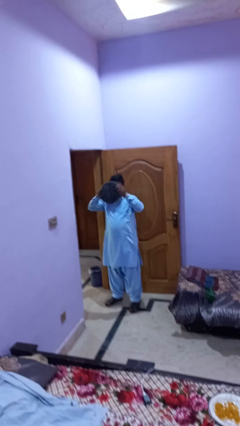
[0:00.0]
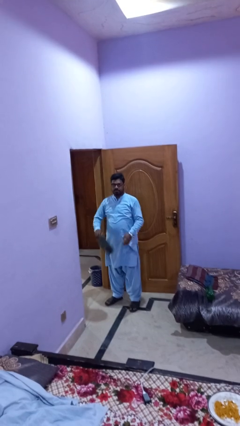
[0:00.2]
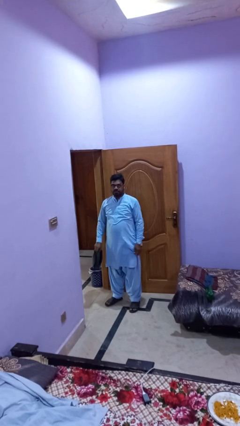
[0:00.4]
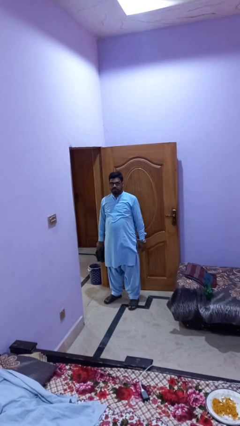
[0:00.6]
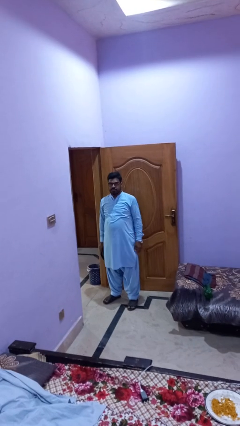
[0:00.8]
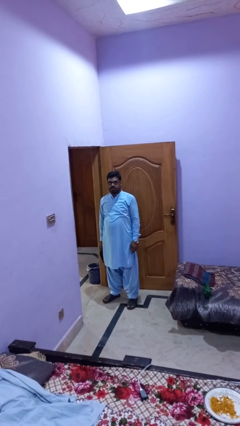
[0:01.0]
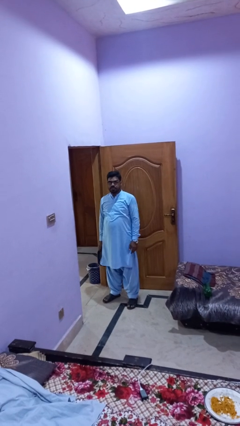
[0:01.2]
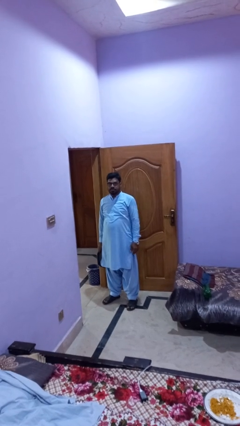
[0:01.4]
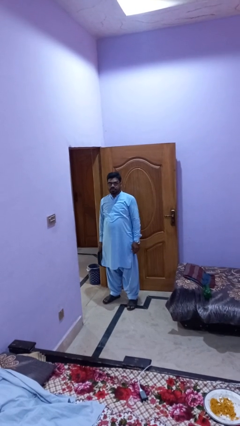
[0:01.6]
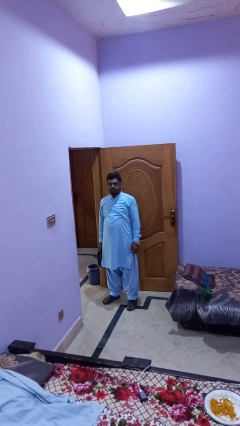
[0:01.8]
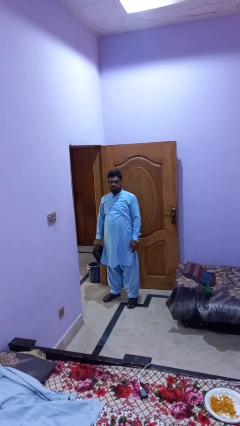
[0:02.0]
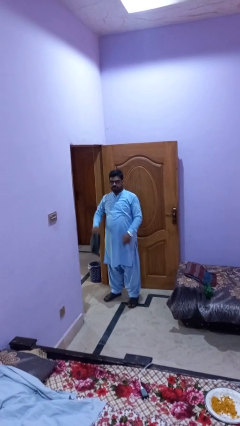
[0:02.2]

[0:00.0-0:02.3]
person takes off hat

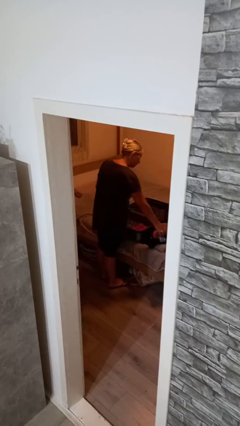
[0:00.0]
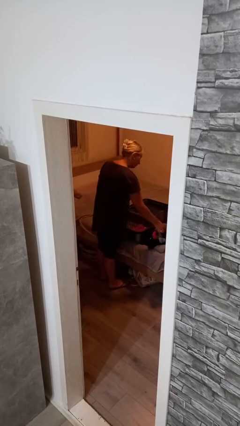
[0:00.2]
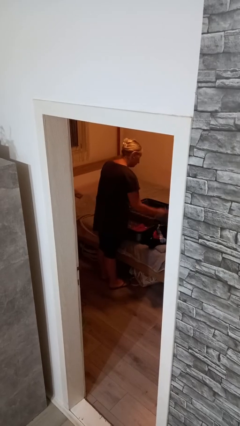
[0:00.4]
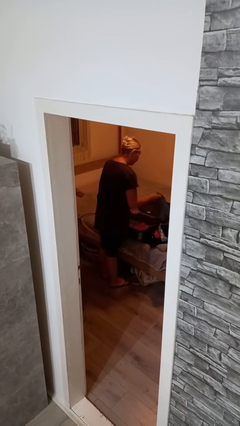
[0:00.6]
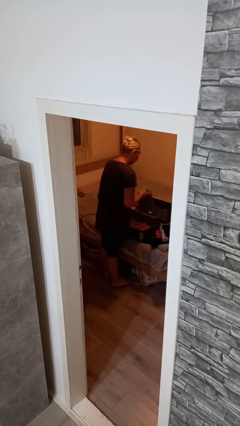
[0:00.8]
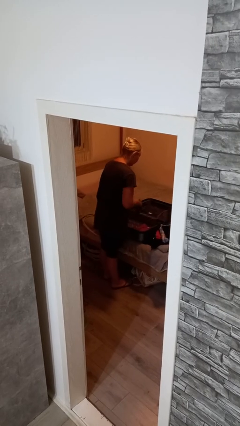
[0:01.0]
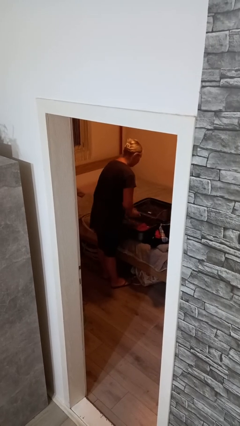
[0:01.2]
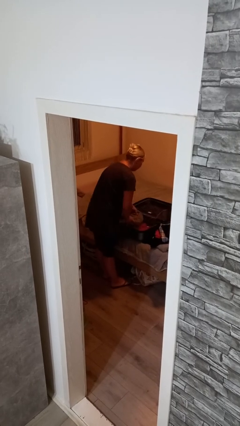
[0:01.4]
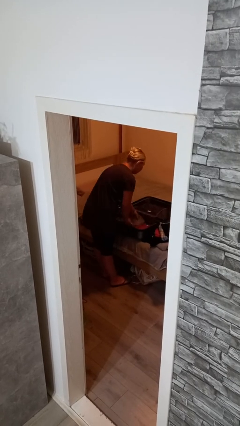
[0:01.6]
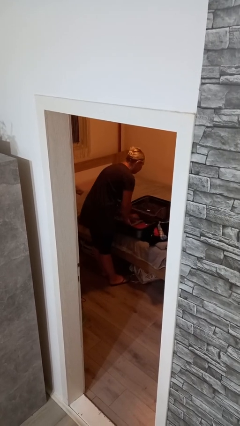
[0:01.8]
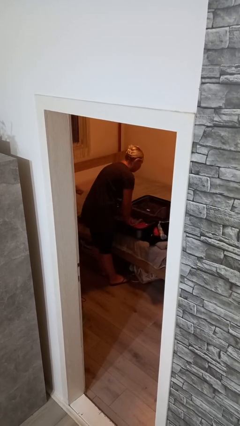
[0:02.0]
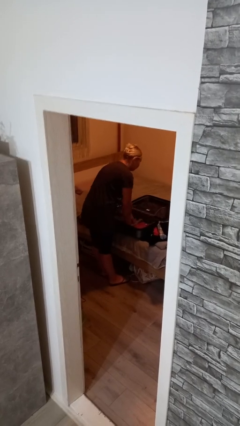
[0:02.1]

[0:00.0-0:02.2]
person loads clothes into suitcase

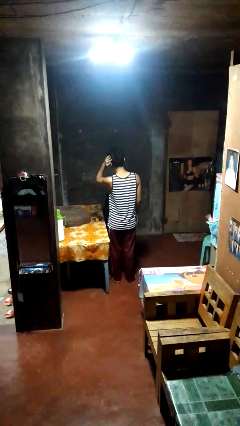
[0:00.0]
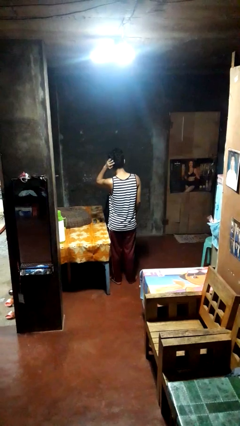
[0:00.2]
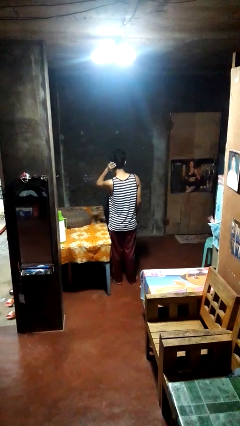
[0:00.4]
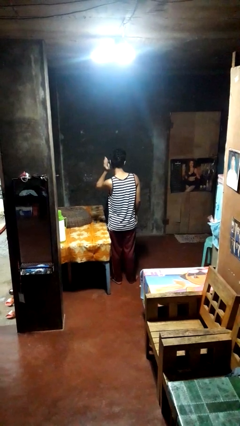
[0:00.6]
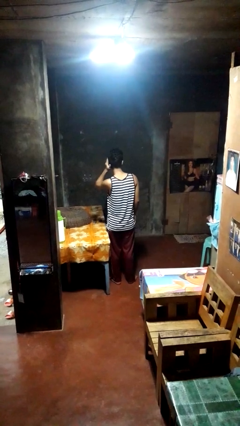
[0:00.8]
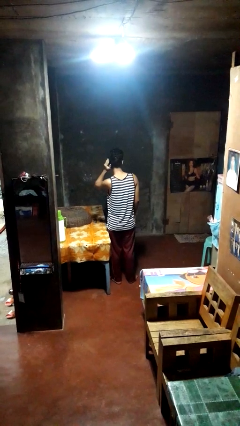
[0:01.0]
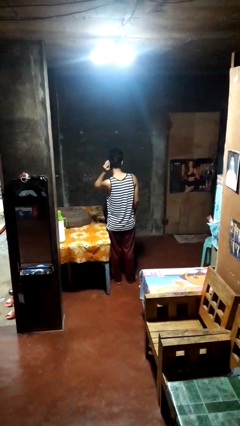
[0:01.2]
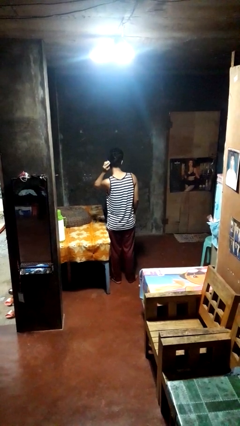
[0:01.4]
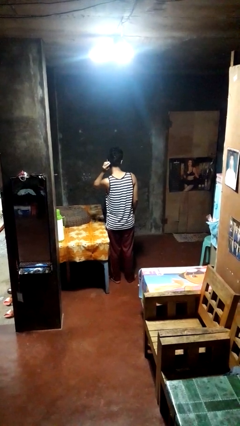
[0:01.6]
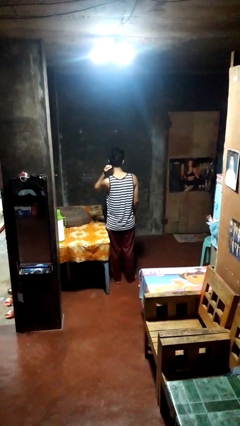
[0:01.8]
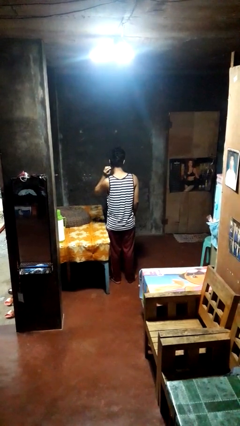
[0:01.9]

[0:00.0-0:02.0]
person strokes hair

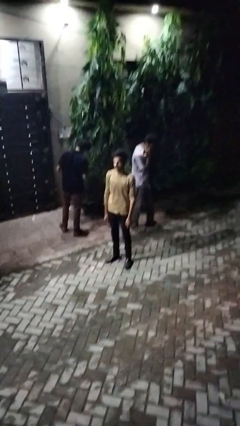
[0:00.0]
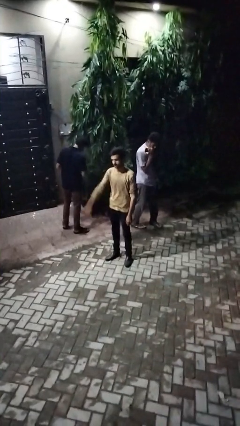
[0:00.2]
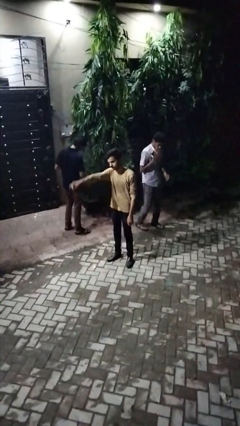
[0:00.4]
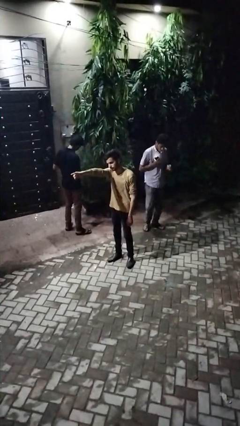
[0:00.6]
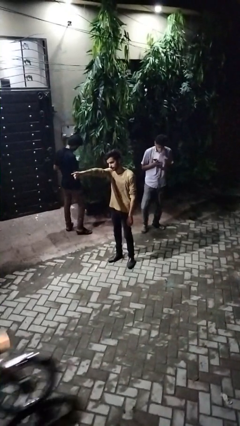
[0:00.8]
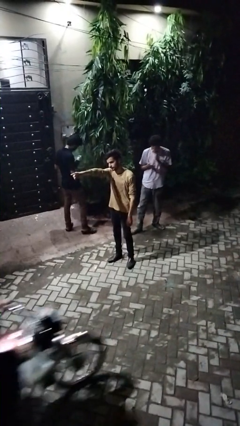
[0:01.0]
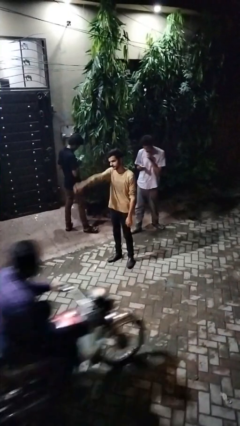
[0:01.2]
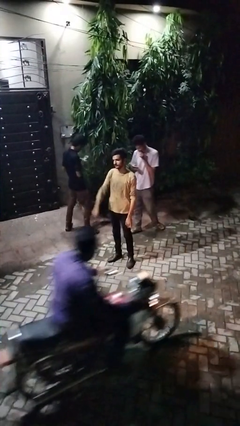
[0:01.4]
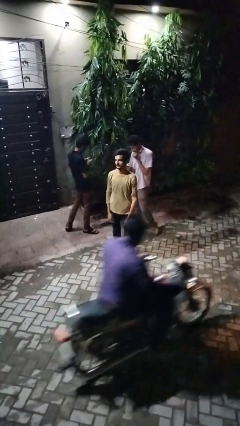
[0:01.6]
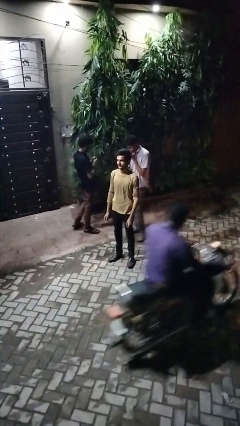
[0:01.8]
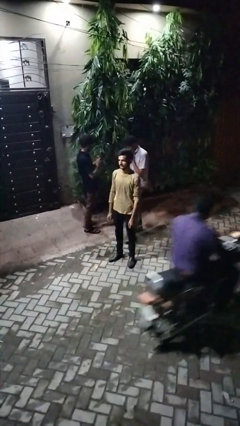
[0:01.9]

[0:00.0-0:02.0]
person points at person

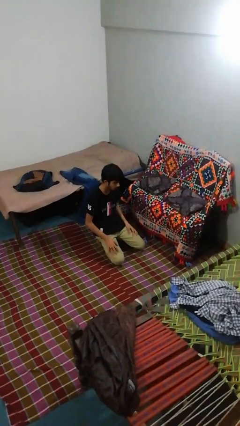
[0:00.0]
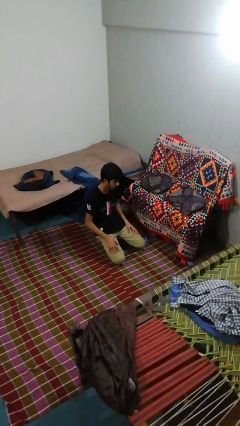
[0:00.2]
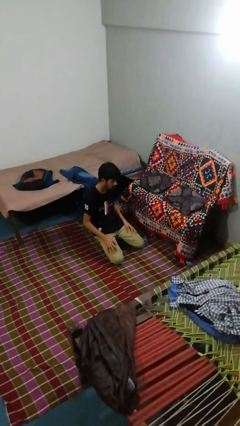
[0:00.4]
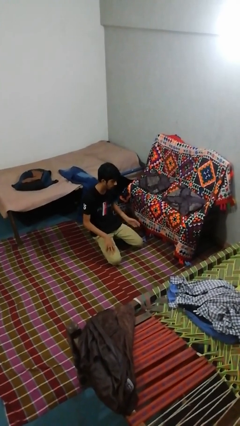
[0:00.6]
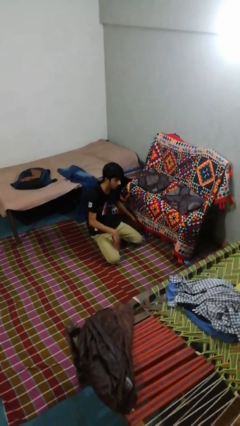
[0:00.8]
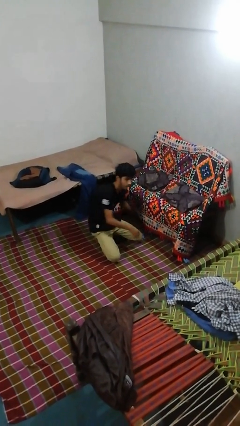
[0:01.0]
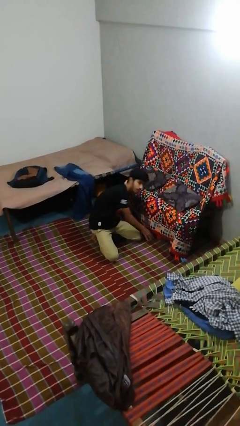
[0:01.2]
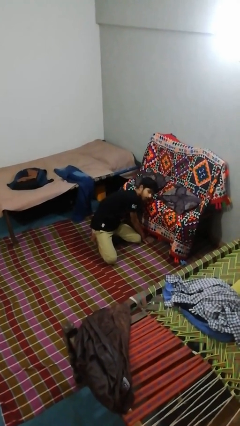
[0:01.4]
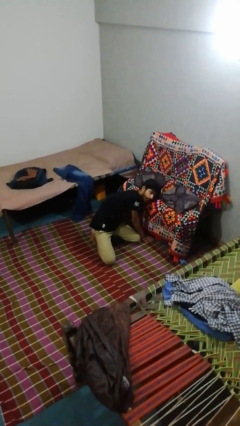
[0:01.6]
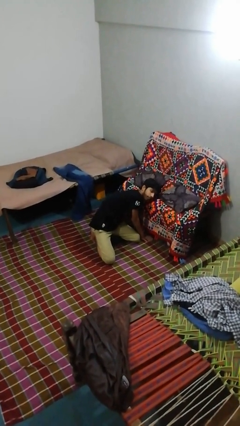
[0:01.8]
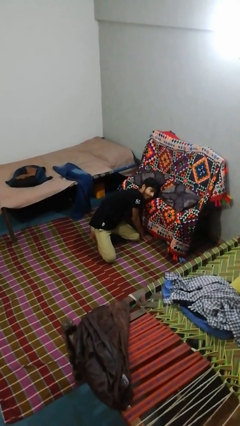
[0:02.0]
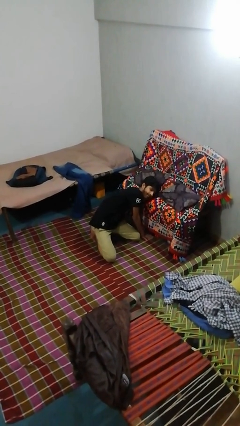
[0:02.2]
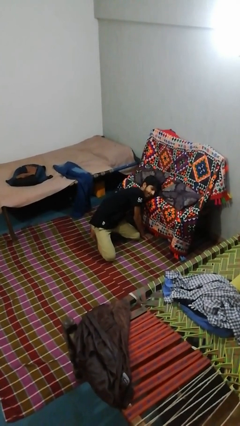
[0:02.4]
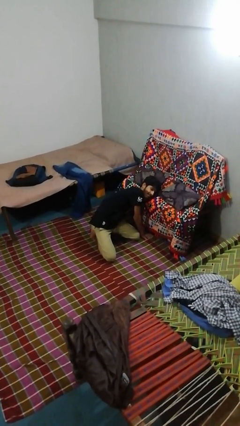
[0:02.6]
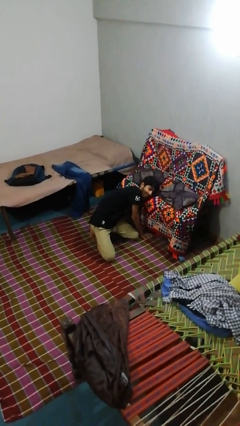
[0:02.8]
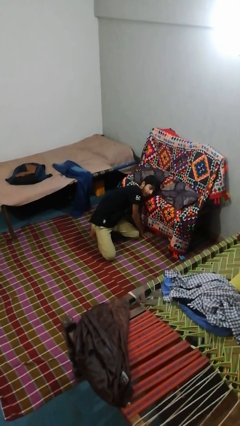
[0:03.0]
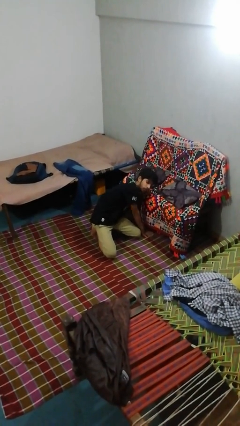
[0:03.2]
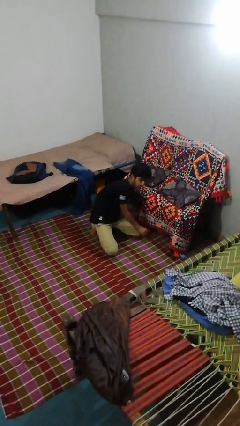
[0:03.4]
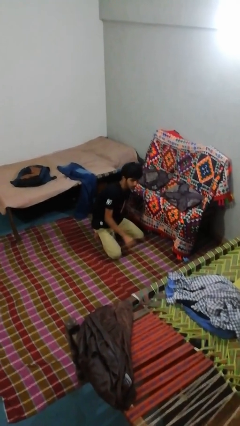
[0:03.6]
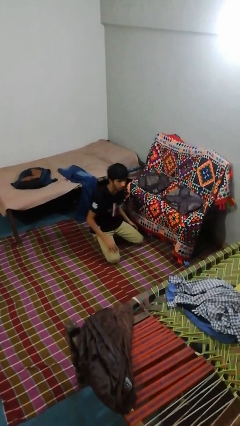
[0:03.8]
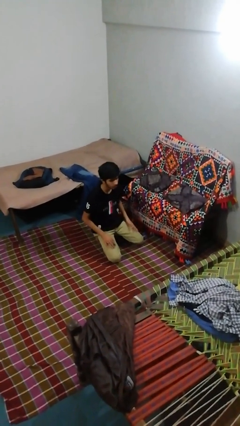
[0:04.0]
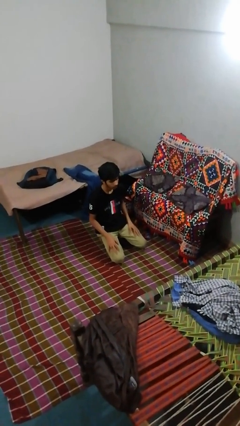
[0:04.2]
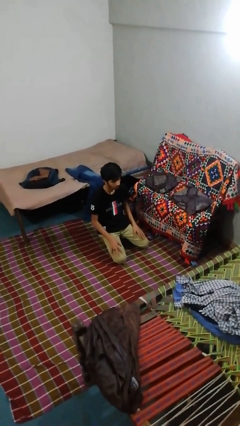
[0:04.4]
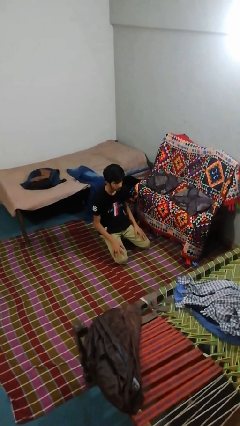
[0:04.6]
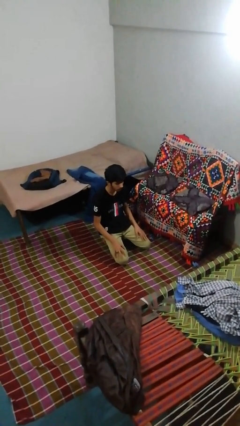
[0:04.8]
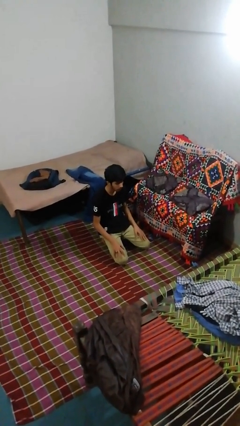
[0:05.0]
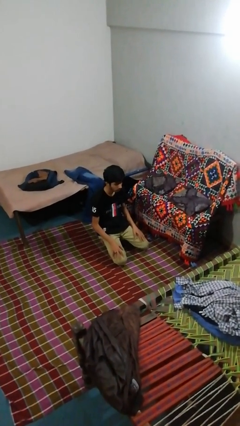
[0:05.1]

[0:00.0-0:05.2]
person searches under couch

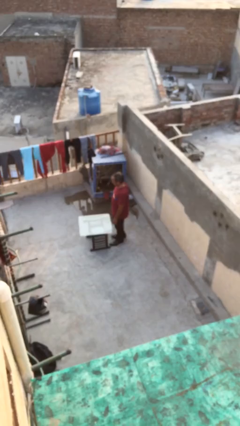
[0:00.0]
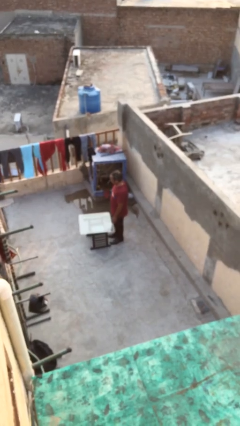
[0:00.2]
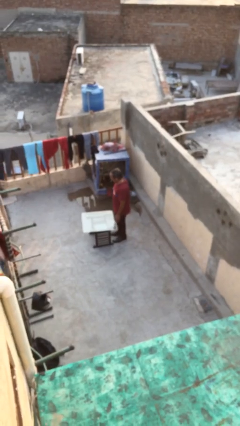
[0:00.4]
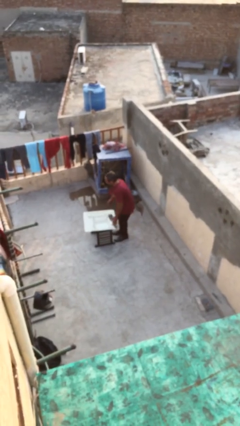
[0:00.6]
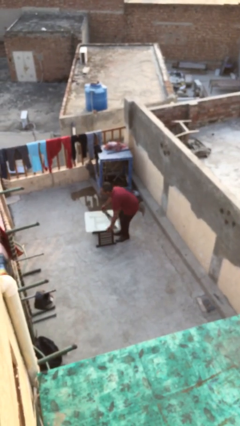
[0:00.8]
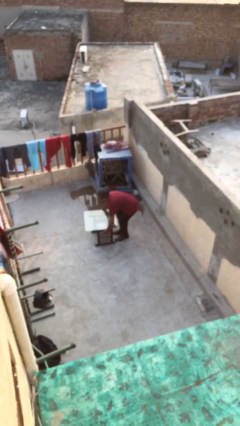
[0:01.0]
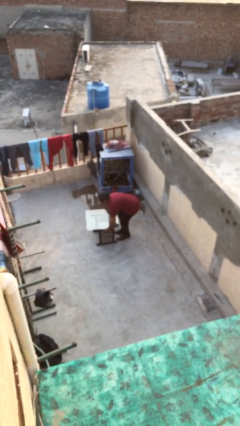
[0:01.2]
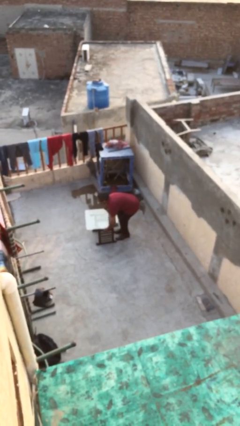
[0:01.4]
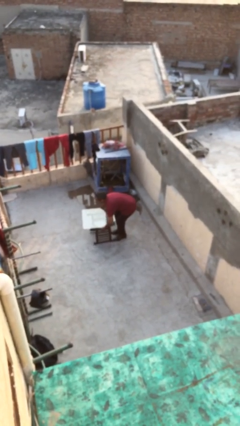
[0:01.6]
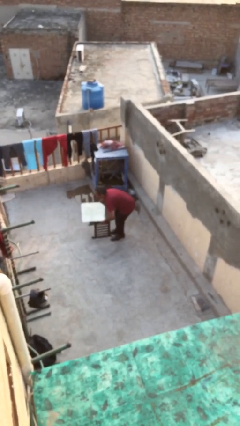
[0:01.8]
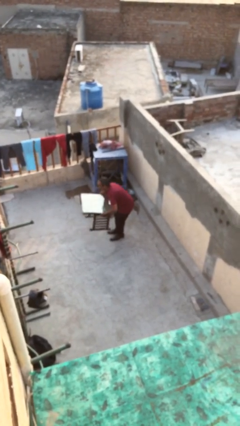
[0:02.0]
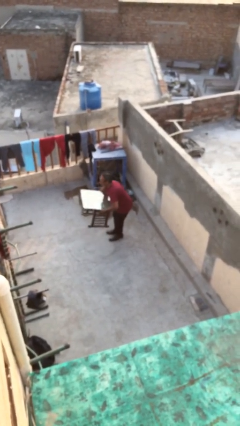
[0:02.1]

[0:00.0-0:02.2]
person picks up object from floor

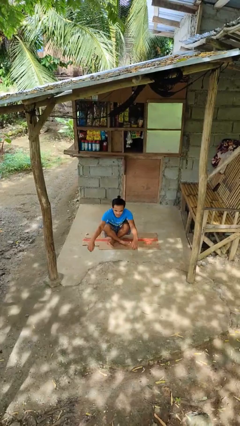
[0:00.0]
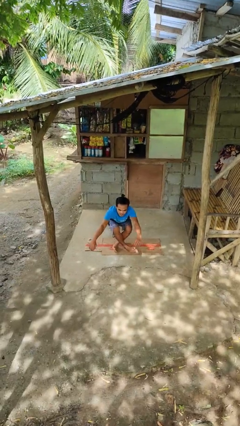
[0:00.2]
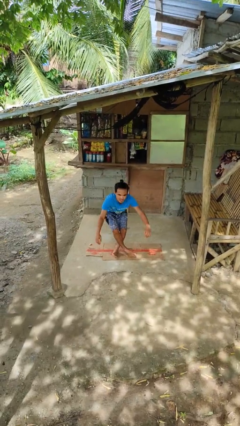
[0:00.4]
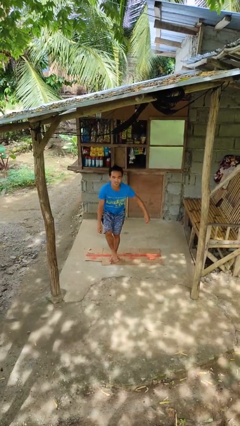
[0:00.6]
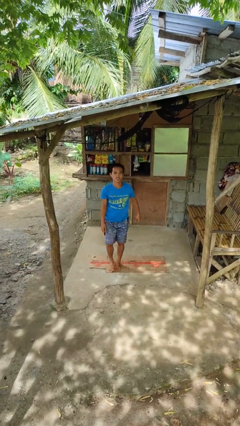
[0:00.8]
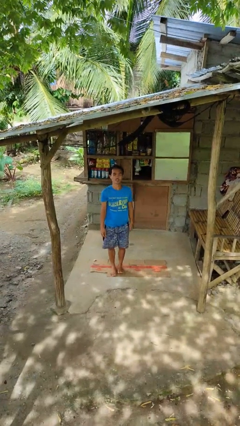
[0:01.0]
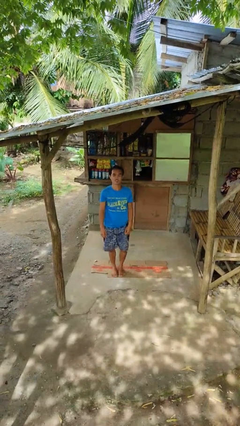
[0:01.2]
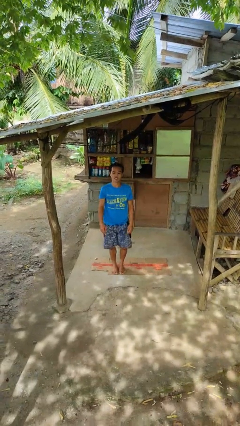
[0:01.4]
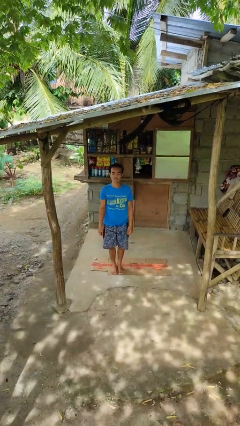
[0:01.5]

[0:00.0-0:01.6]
person stands up from floor
